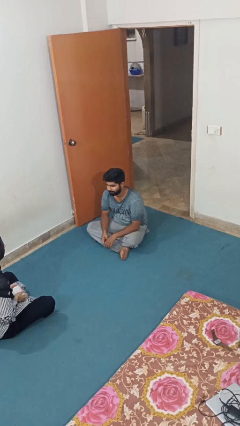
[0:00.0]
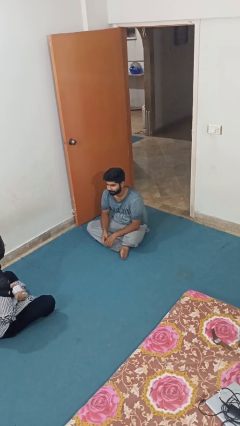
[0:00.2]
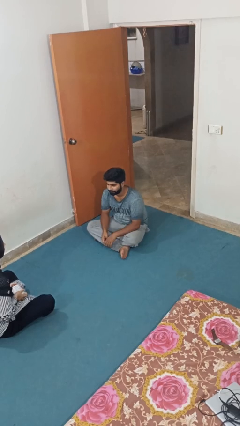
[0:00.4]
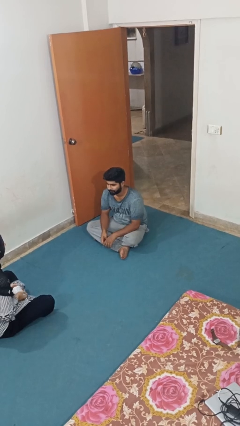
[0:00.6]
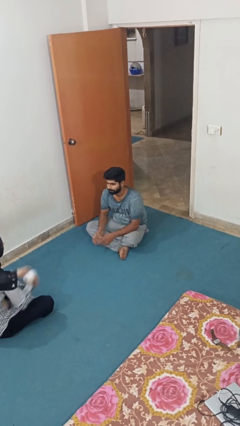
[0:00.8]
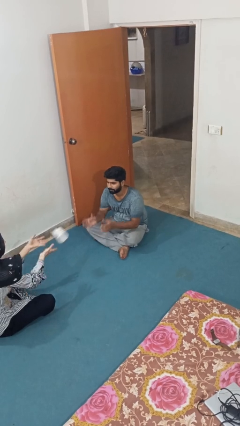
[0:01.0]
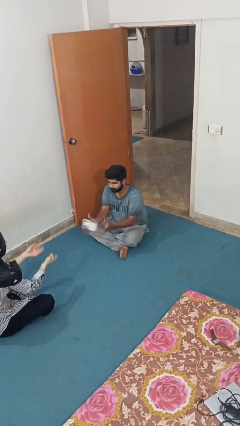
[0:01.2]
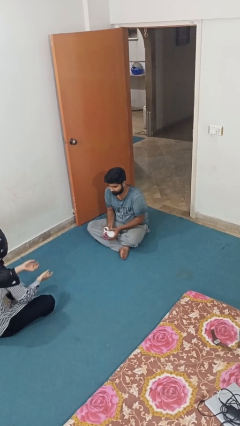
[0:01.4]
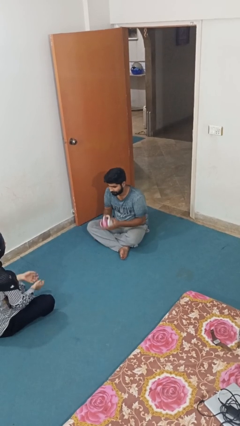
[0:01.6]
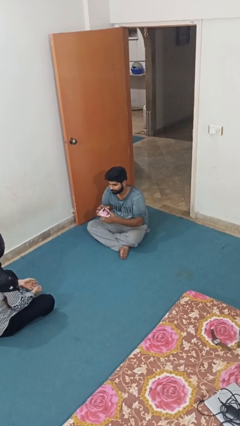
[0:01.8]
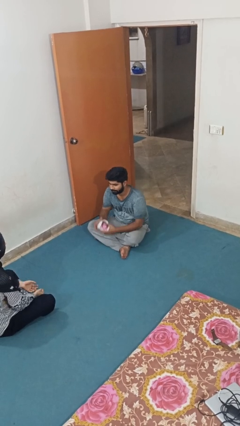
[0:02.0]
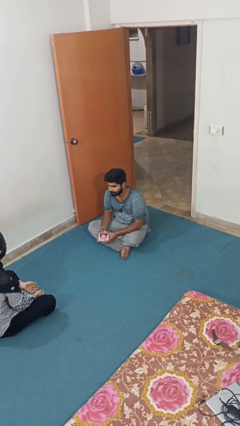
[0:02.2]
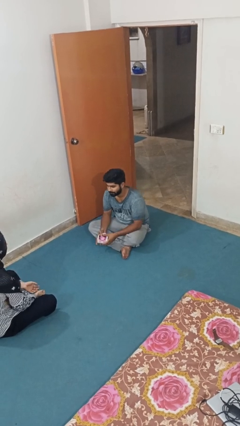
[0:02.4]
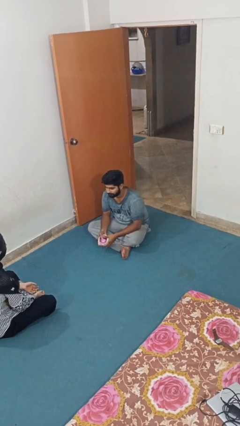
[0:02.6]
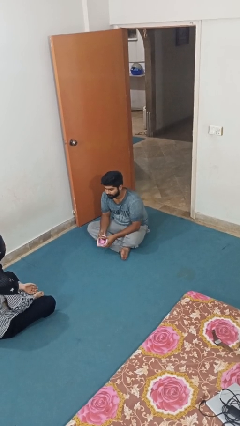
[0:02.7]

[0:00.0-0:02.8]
person catches object from person

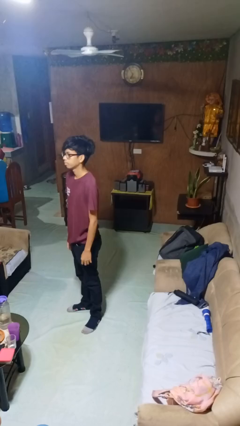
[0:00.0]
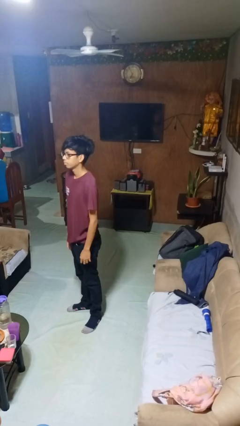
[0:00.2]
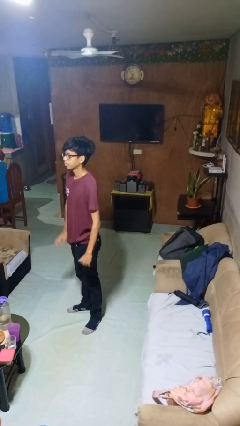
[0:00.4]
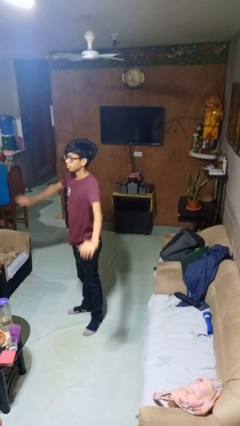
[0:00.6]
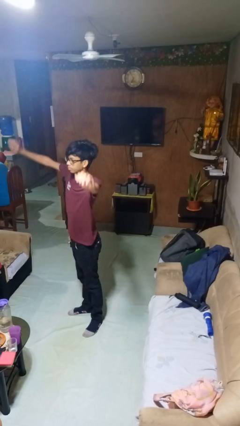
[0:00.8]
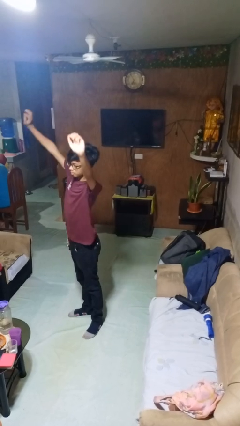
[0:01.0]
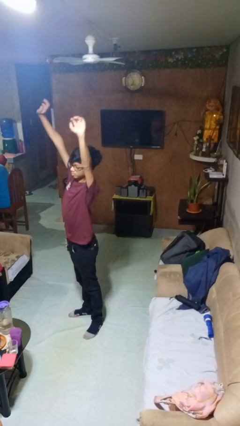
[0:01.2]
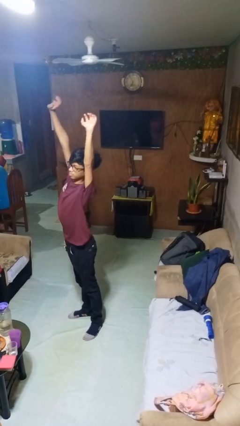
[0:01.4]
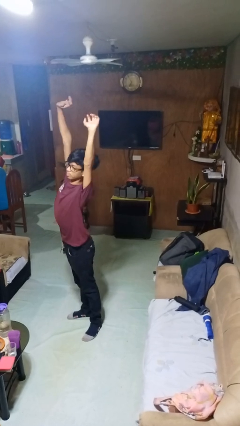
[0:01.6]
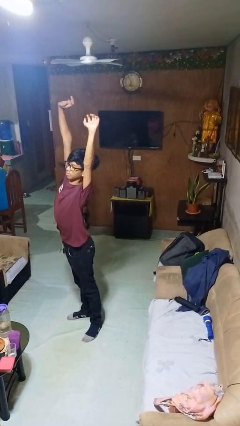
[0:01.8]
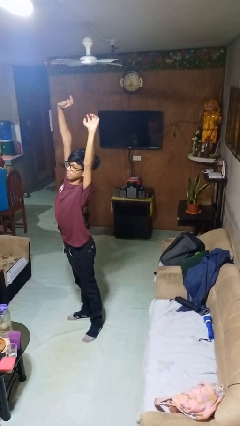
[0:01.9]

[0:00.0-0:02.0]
person stretches arms over head

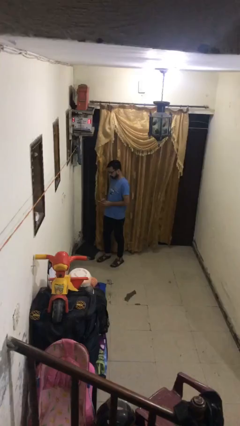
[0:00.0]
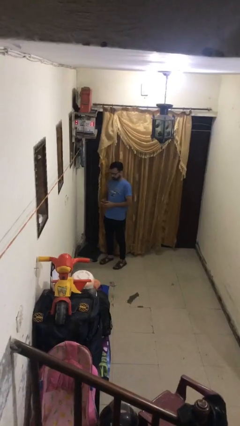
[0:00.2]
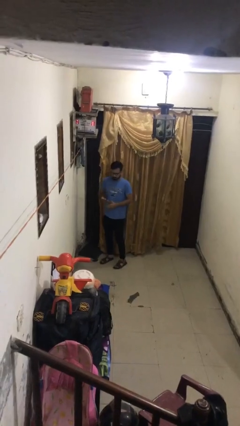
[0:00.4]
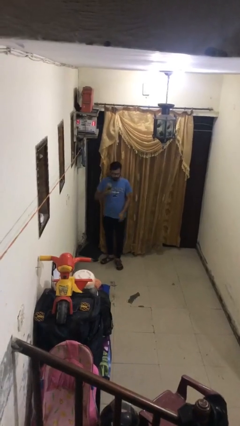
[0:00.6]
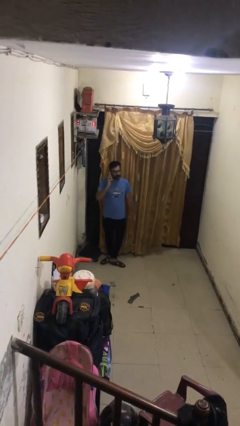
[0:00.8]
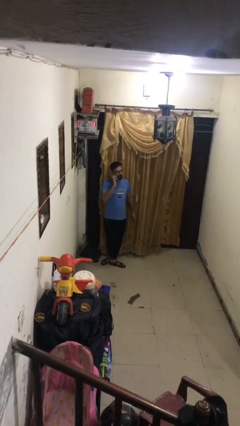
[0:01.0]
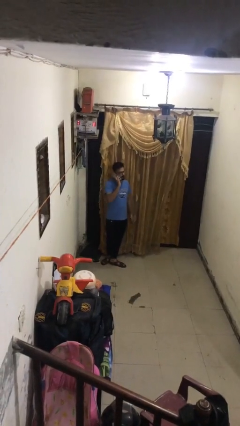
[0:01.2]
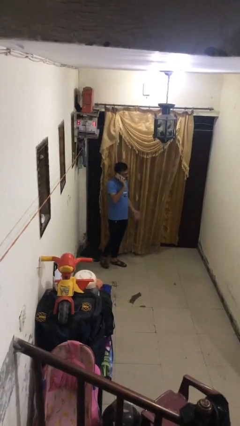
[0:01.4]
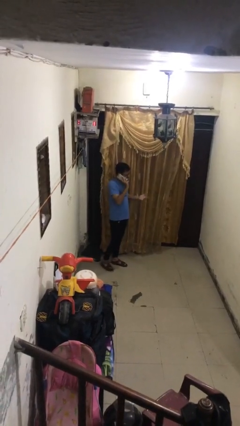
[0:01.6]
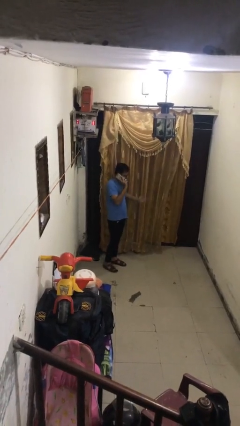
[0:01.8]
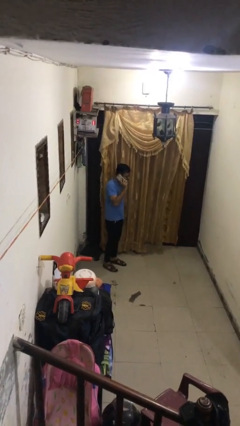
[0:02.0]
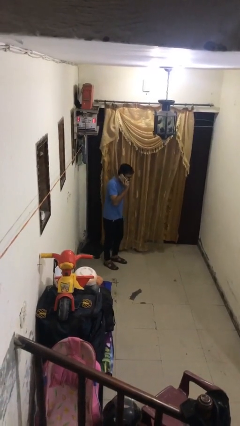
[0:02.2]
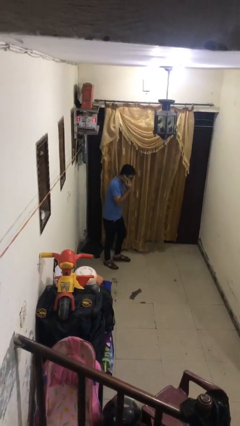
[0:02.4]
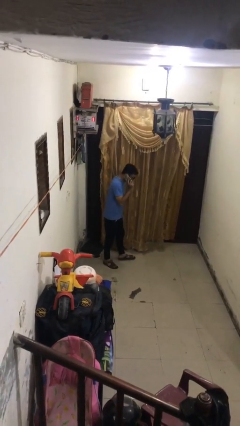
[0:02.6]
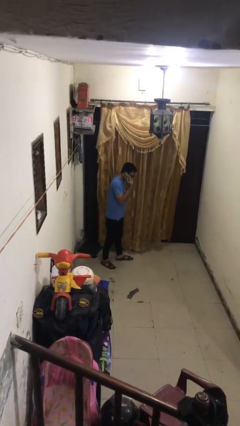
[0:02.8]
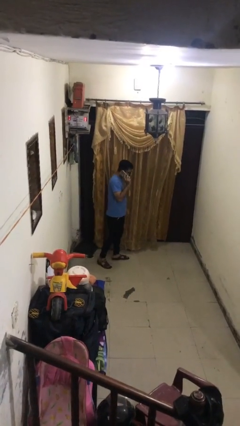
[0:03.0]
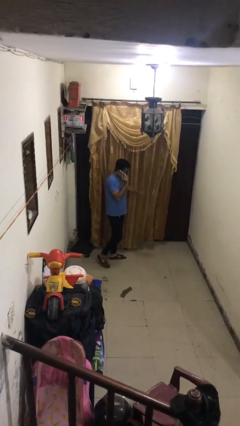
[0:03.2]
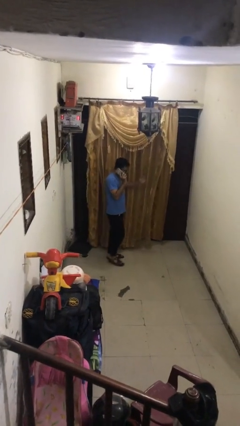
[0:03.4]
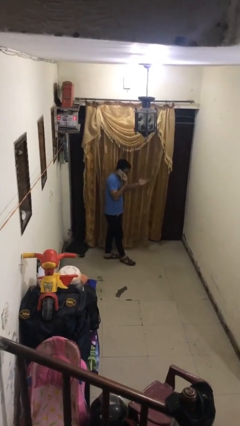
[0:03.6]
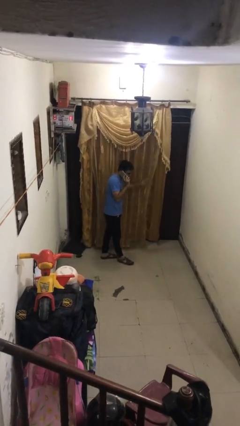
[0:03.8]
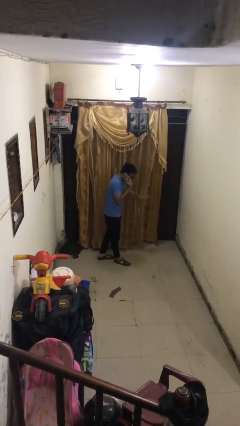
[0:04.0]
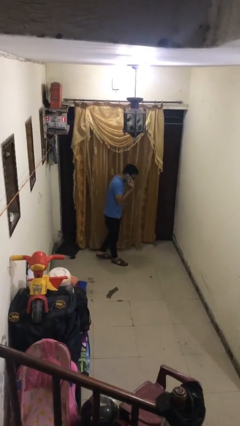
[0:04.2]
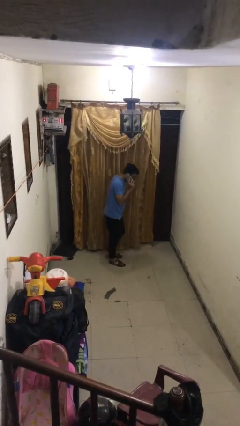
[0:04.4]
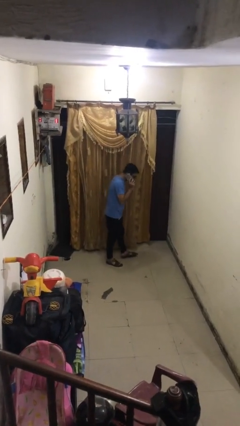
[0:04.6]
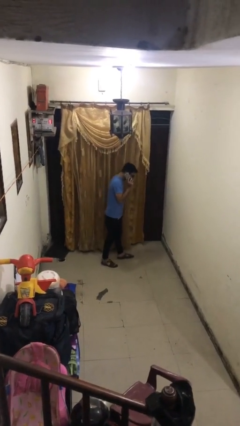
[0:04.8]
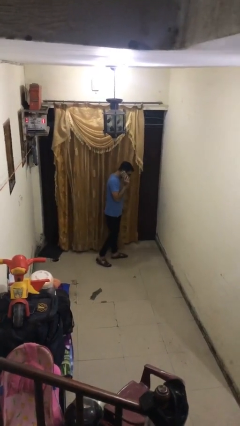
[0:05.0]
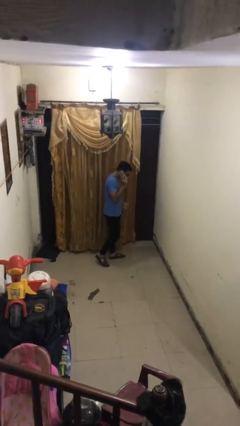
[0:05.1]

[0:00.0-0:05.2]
person talks on phone

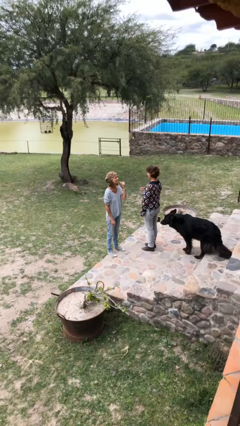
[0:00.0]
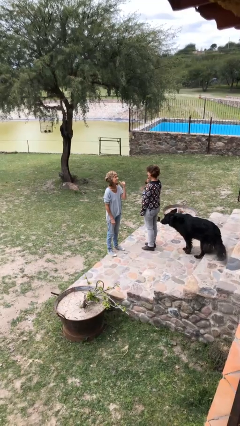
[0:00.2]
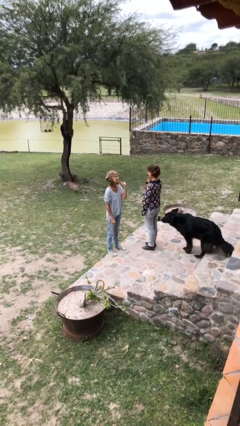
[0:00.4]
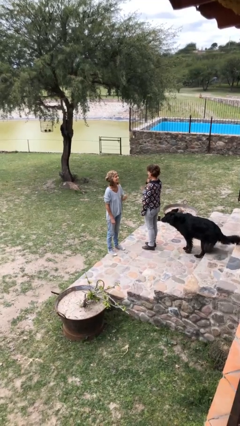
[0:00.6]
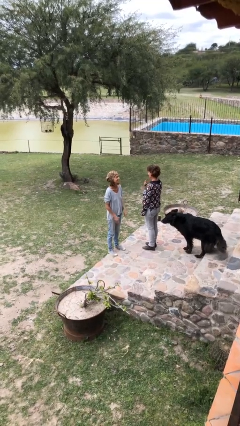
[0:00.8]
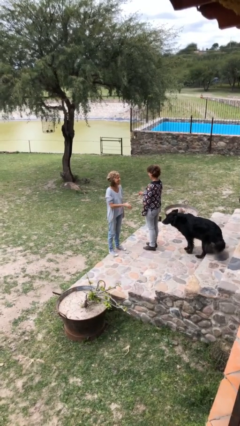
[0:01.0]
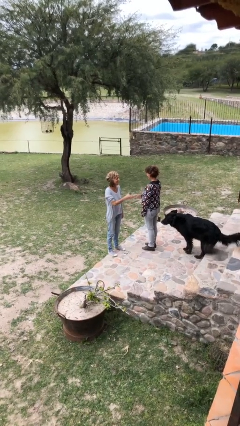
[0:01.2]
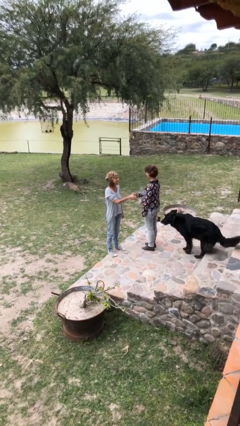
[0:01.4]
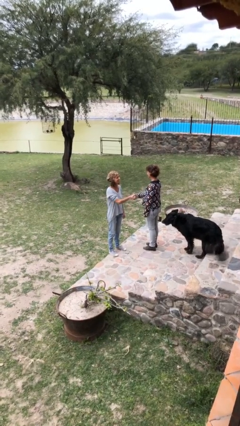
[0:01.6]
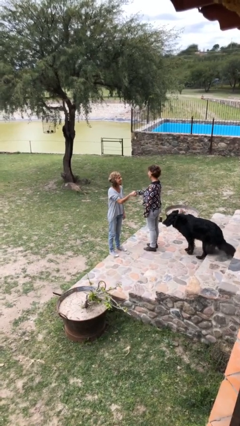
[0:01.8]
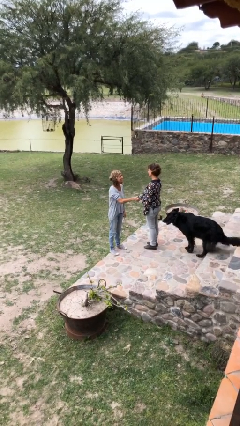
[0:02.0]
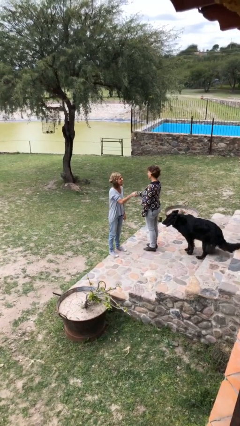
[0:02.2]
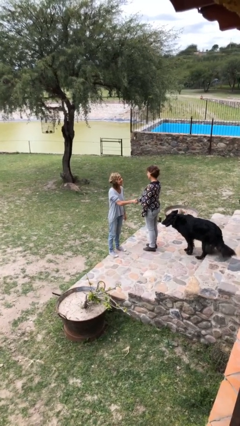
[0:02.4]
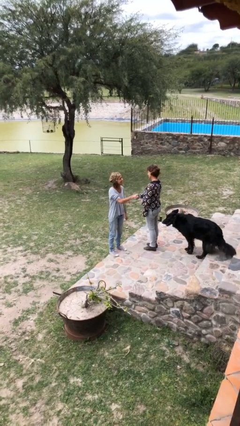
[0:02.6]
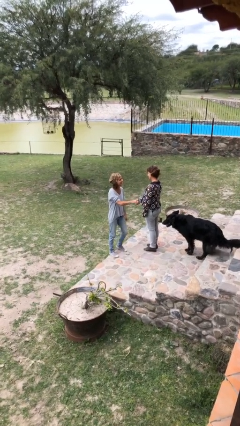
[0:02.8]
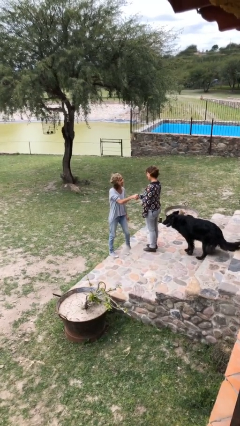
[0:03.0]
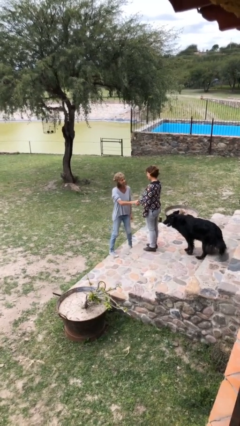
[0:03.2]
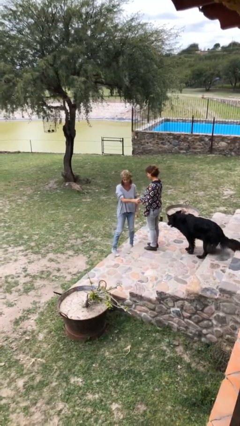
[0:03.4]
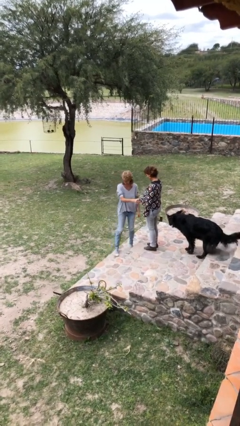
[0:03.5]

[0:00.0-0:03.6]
person shakes hand

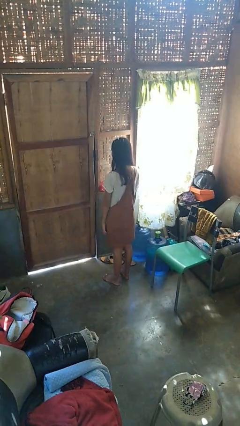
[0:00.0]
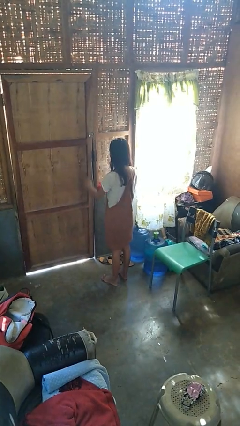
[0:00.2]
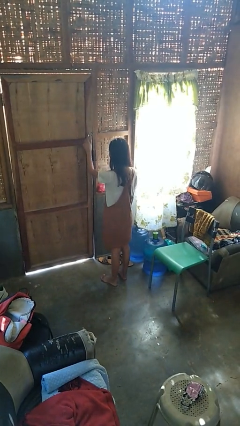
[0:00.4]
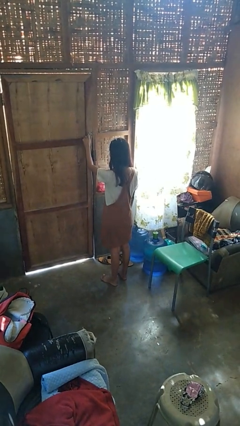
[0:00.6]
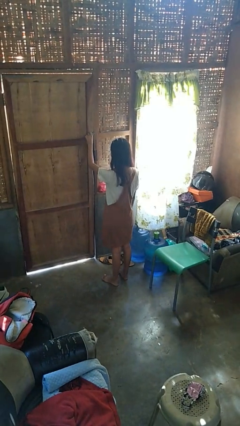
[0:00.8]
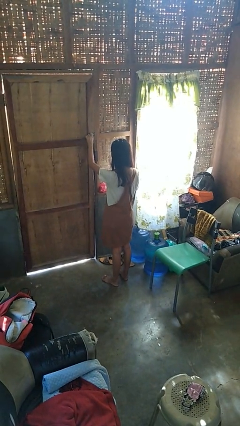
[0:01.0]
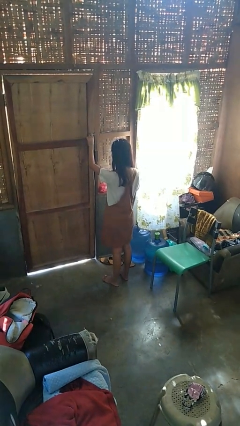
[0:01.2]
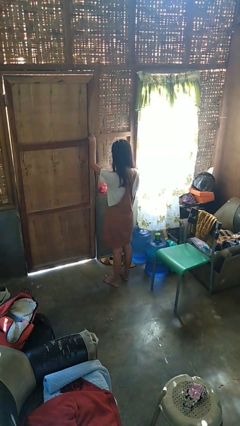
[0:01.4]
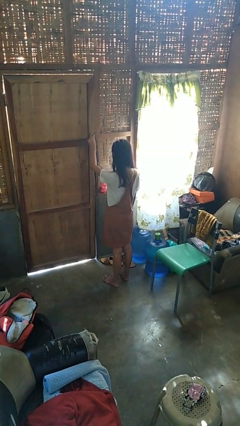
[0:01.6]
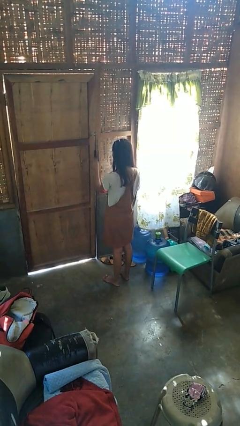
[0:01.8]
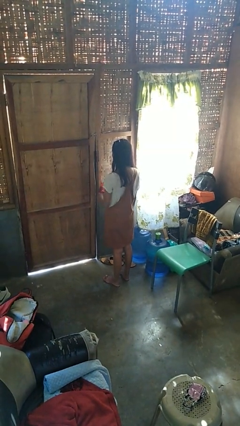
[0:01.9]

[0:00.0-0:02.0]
person locks door with keys

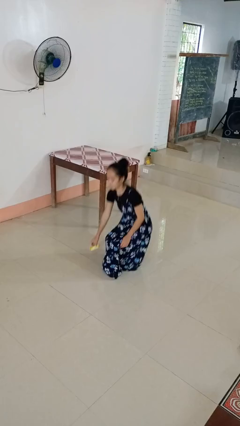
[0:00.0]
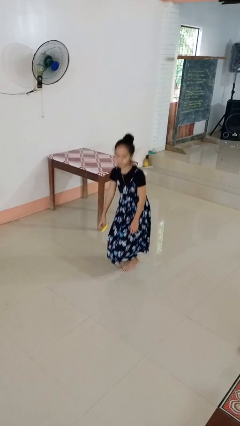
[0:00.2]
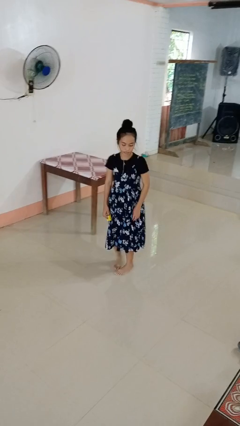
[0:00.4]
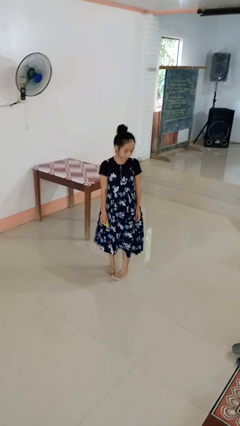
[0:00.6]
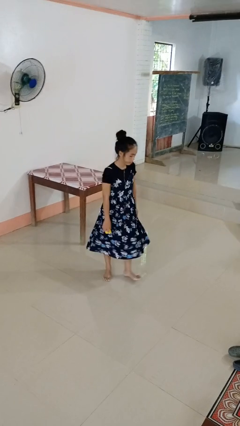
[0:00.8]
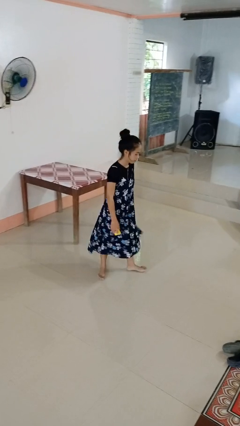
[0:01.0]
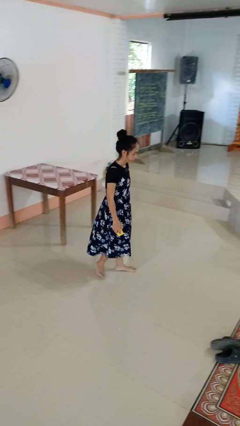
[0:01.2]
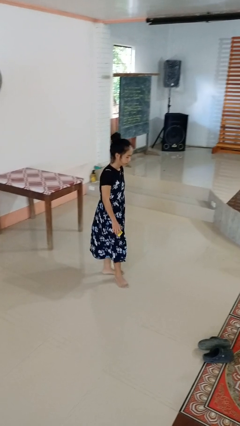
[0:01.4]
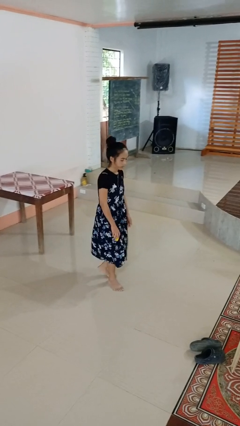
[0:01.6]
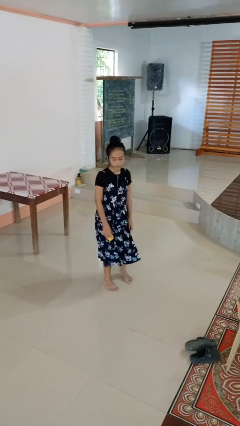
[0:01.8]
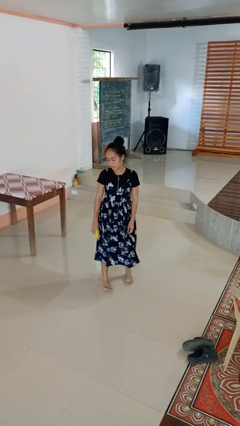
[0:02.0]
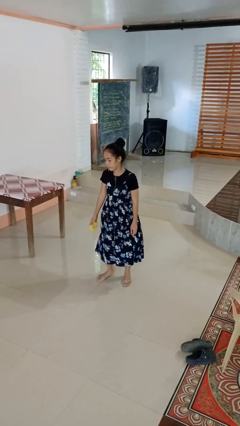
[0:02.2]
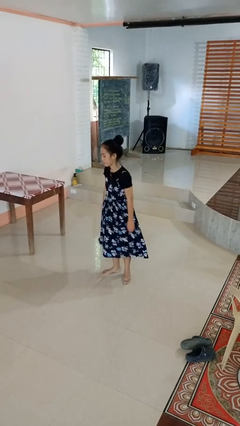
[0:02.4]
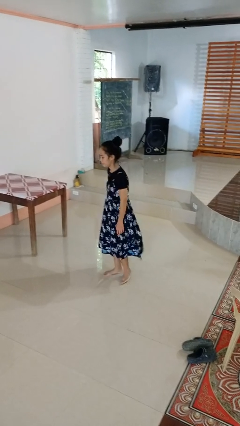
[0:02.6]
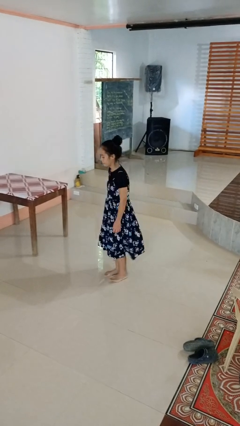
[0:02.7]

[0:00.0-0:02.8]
person picks up object from floor
